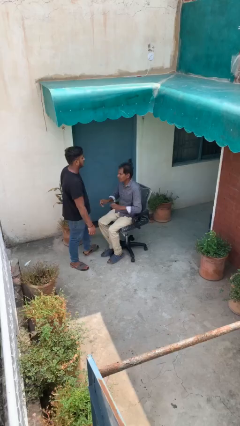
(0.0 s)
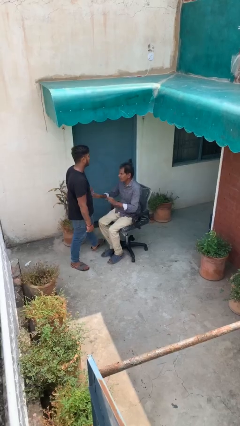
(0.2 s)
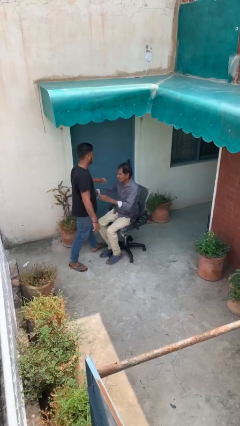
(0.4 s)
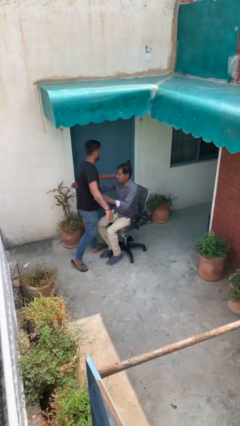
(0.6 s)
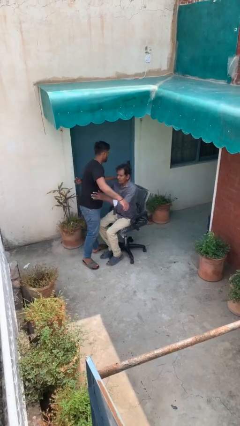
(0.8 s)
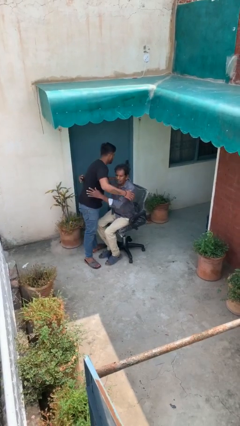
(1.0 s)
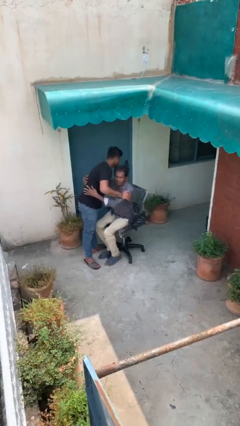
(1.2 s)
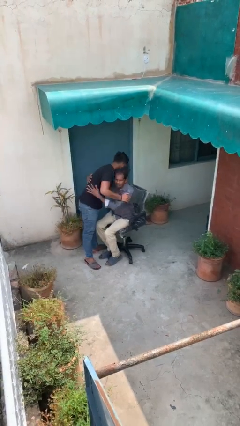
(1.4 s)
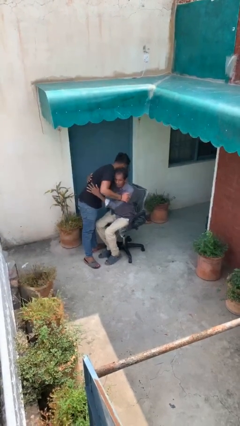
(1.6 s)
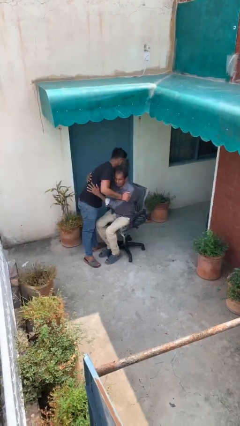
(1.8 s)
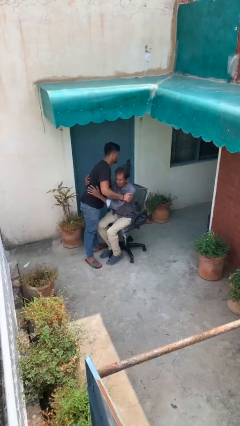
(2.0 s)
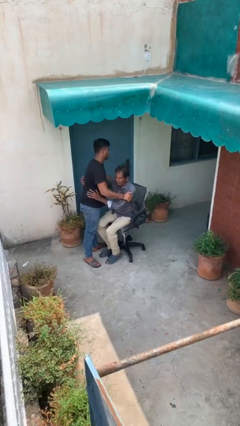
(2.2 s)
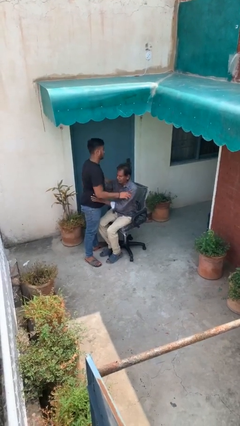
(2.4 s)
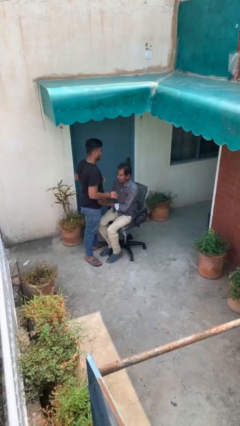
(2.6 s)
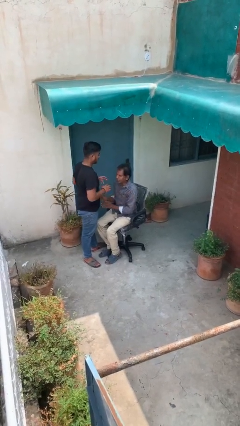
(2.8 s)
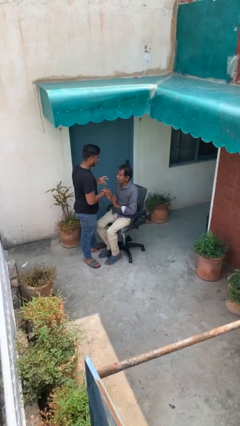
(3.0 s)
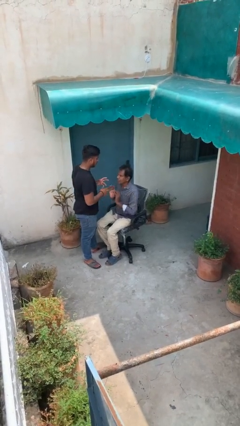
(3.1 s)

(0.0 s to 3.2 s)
person embraces person

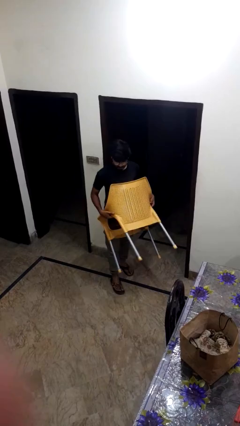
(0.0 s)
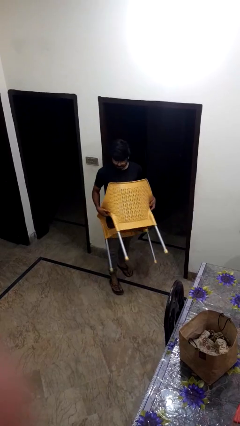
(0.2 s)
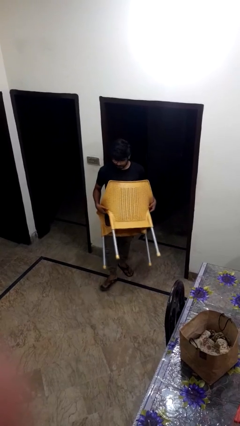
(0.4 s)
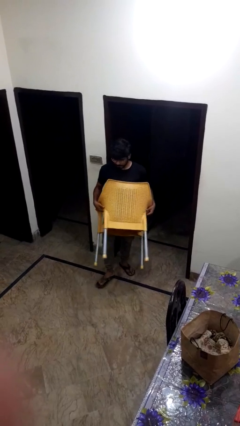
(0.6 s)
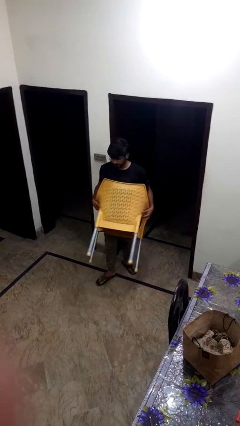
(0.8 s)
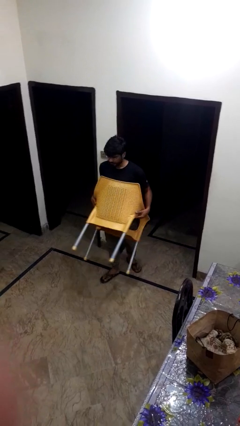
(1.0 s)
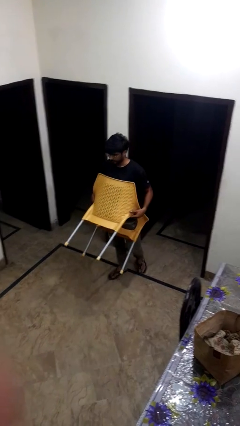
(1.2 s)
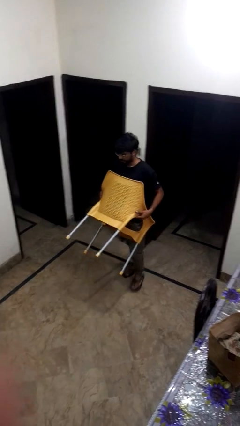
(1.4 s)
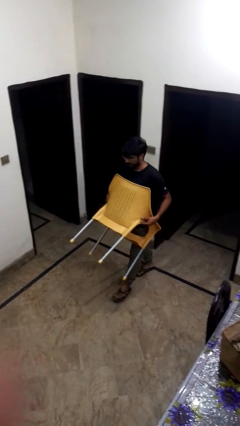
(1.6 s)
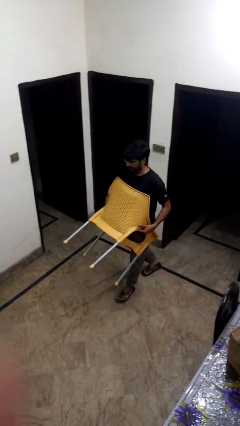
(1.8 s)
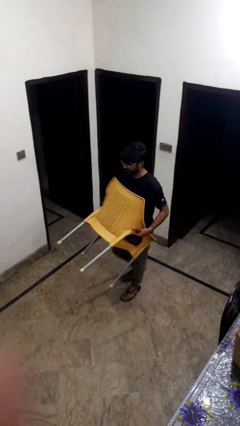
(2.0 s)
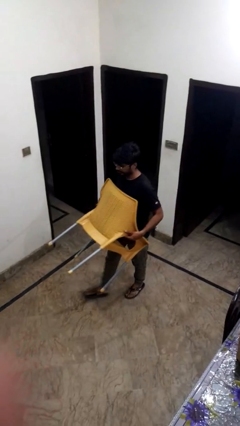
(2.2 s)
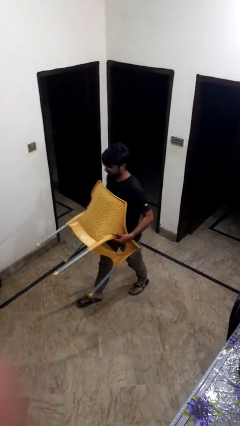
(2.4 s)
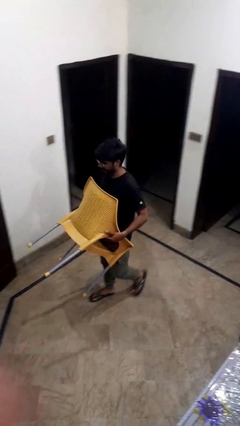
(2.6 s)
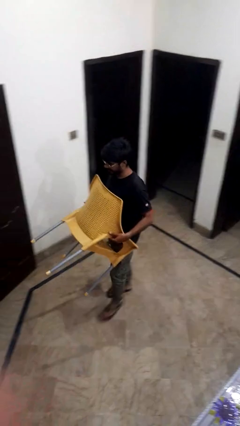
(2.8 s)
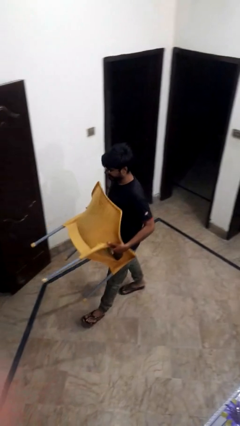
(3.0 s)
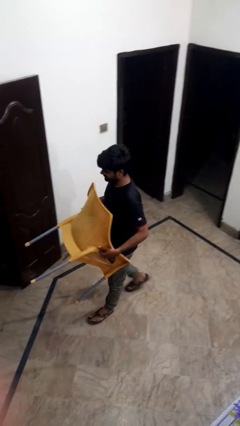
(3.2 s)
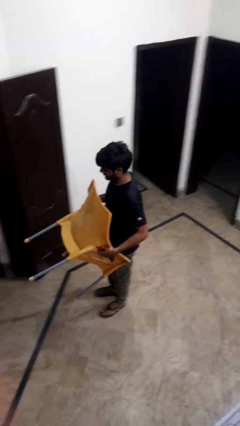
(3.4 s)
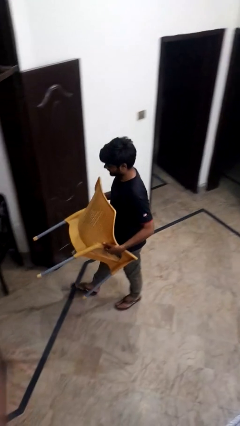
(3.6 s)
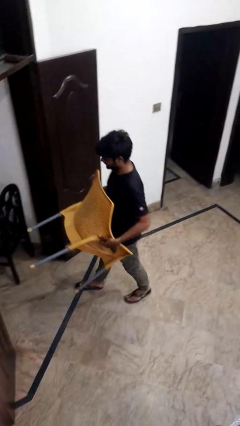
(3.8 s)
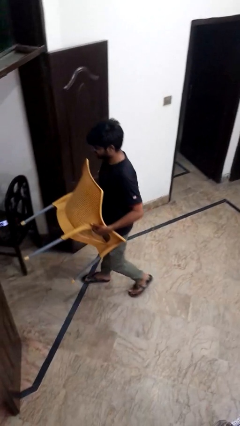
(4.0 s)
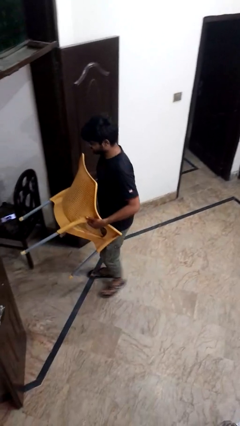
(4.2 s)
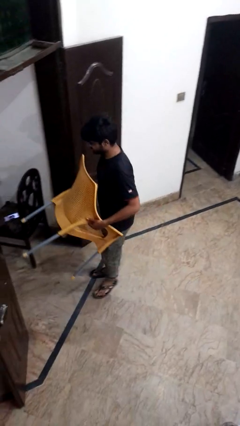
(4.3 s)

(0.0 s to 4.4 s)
person carries furniture

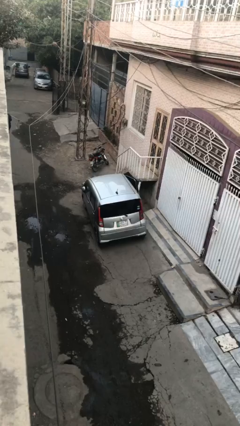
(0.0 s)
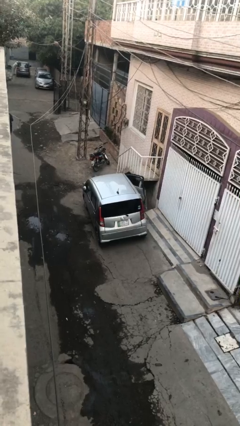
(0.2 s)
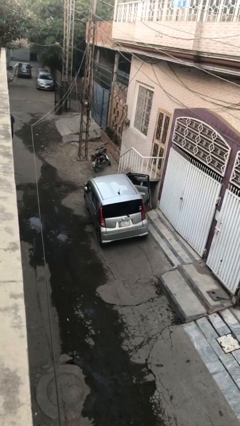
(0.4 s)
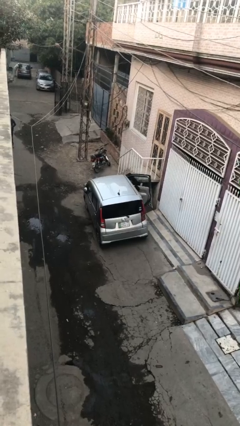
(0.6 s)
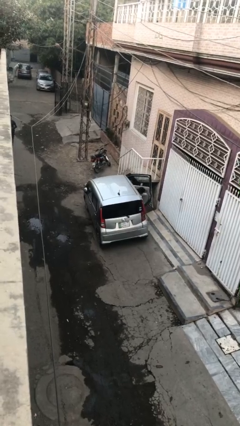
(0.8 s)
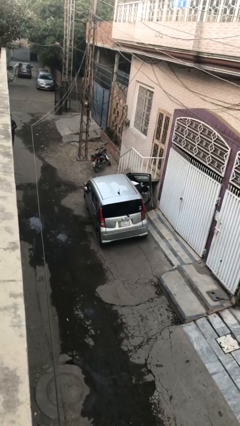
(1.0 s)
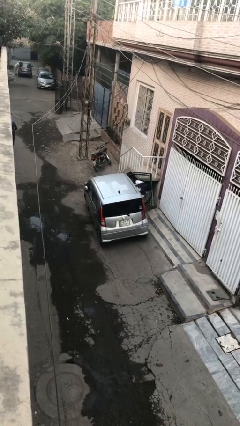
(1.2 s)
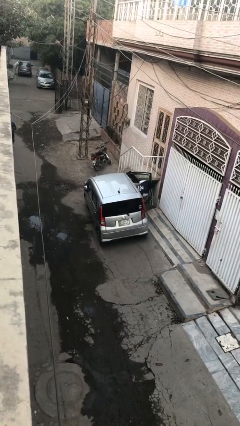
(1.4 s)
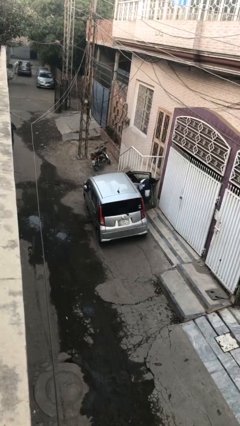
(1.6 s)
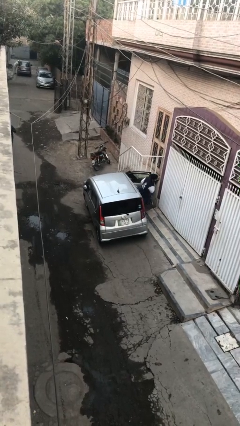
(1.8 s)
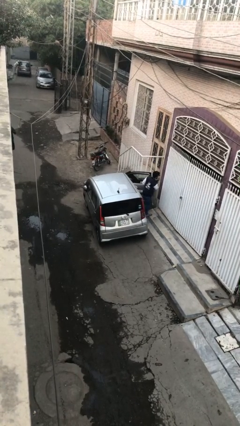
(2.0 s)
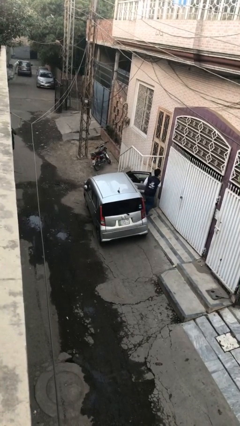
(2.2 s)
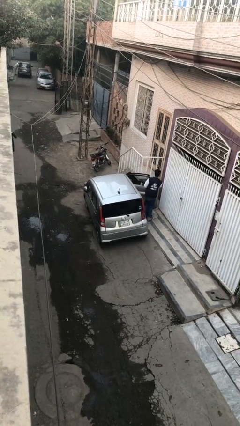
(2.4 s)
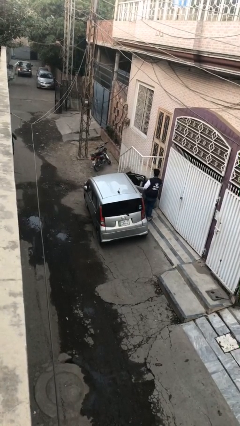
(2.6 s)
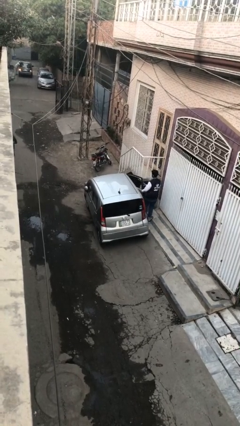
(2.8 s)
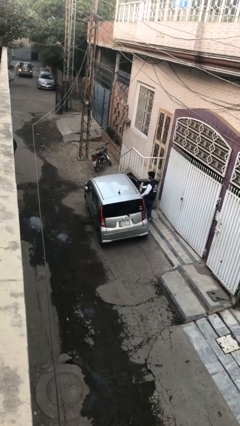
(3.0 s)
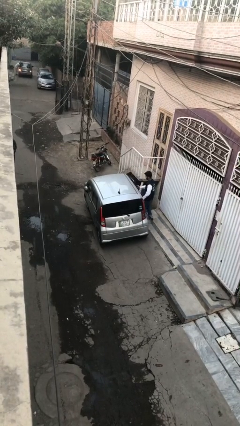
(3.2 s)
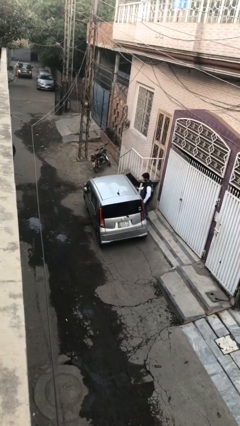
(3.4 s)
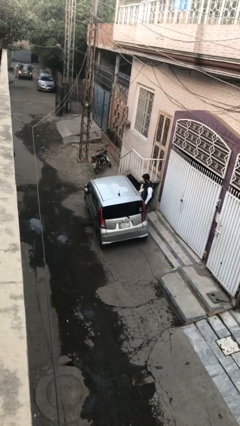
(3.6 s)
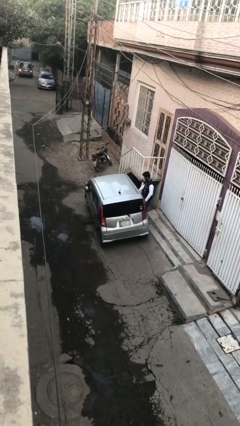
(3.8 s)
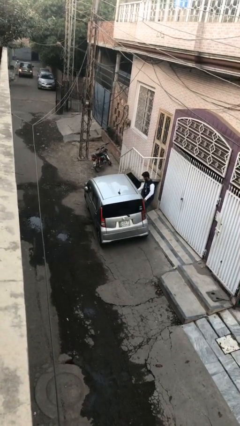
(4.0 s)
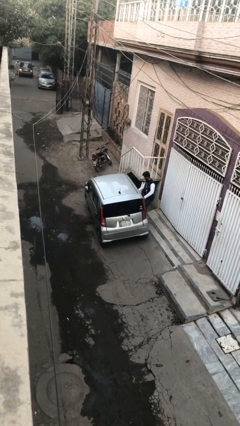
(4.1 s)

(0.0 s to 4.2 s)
car drops off person

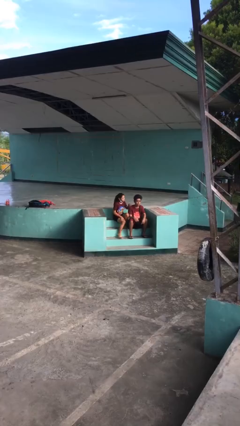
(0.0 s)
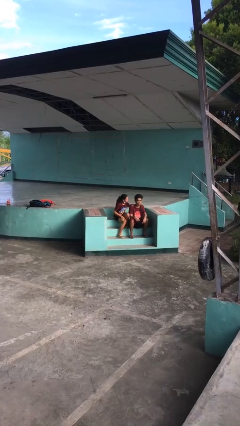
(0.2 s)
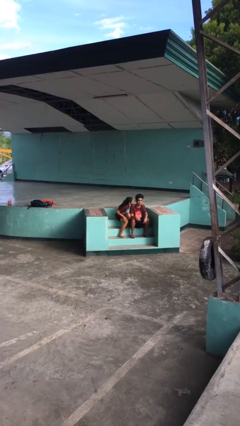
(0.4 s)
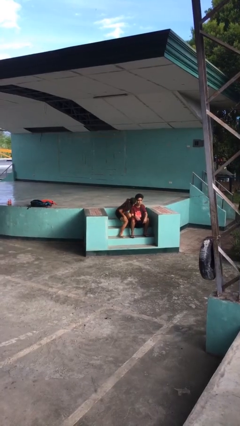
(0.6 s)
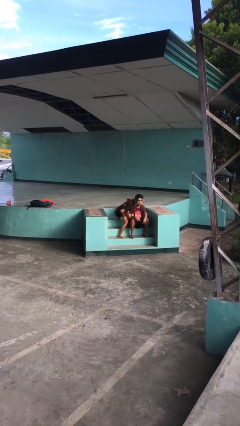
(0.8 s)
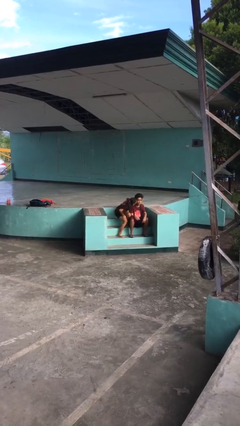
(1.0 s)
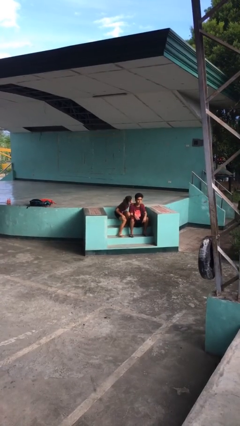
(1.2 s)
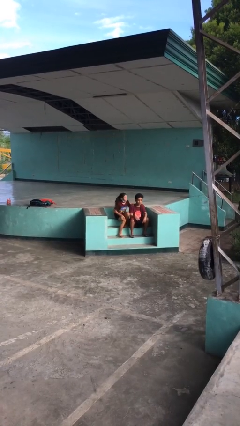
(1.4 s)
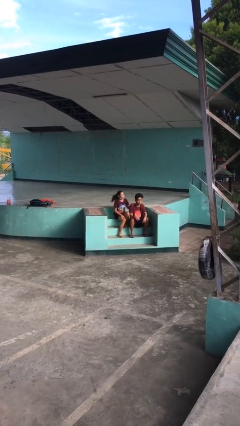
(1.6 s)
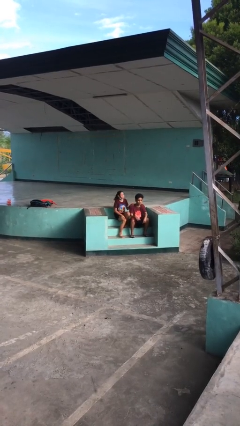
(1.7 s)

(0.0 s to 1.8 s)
person kisses cheek of person

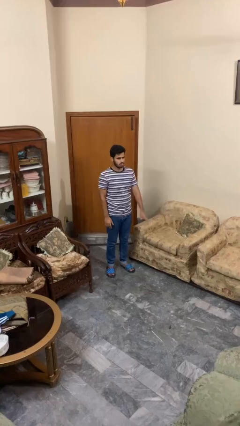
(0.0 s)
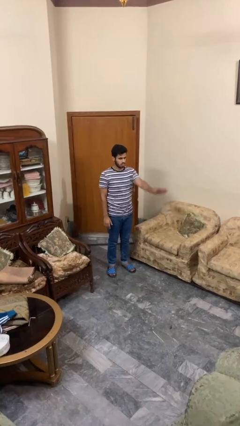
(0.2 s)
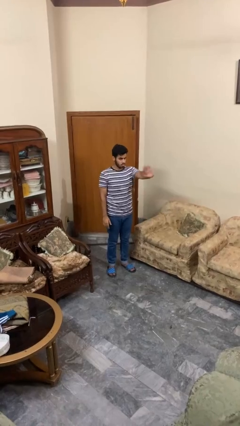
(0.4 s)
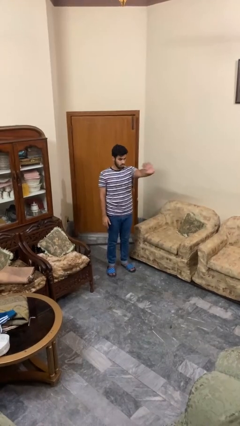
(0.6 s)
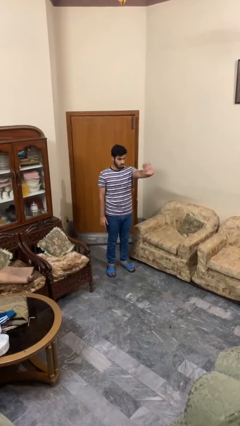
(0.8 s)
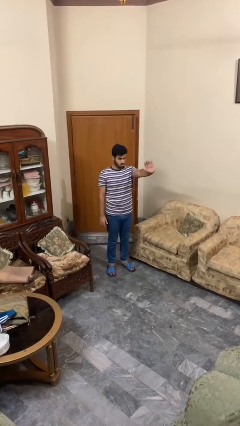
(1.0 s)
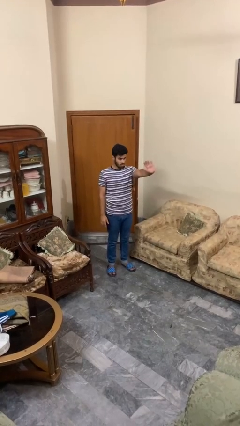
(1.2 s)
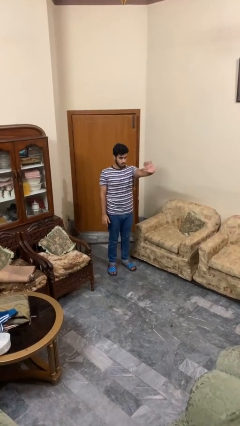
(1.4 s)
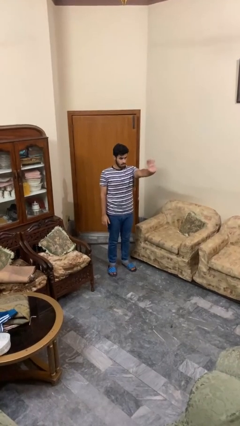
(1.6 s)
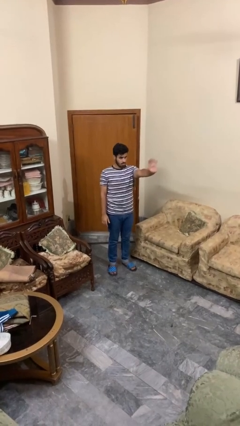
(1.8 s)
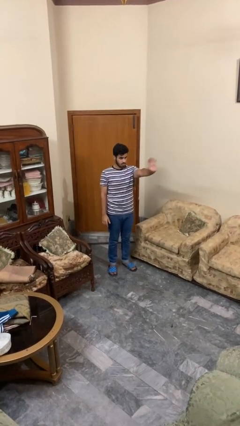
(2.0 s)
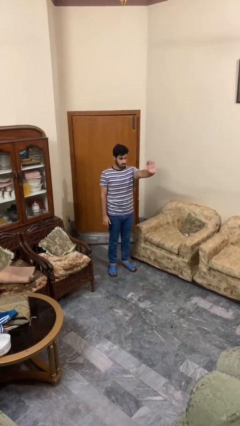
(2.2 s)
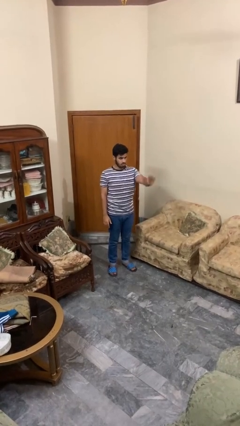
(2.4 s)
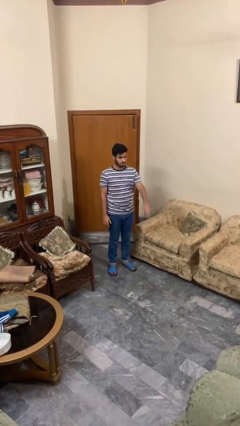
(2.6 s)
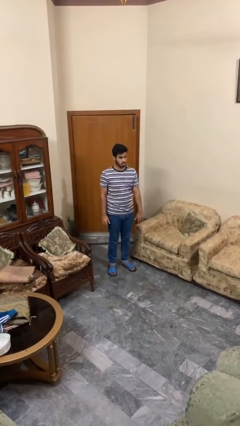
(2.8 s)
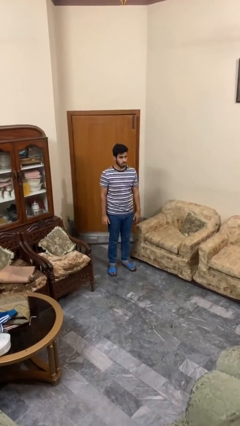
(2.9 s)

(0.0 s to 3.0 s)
person waves at person

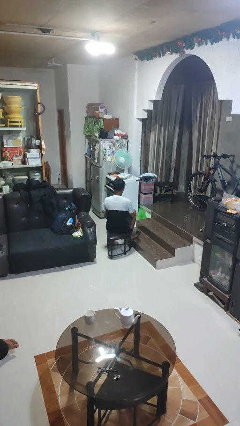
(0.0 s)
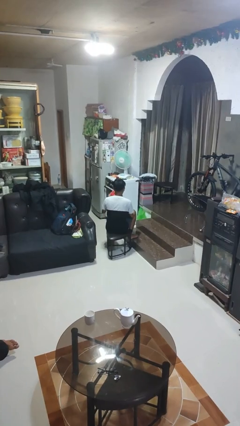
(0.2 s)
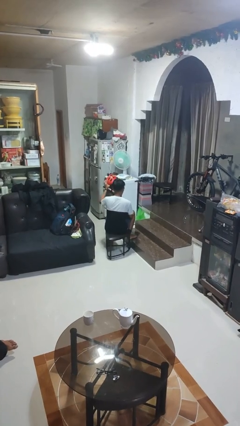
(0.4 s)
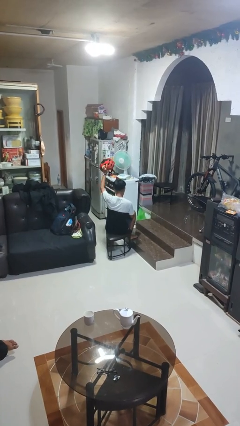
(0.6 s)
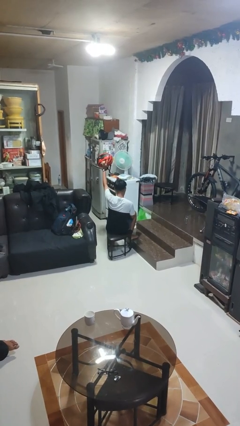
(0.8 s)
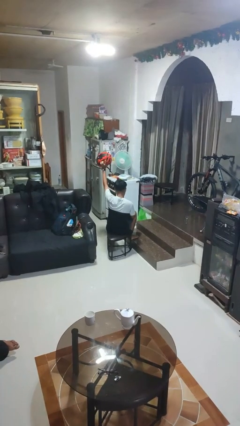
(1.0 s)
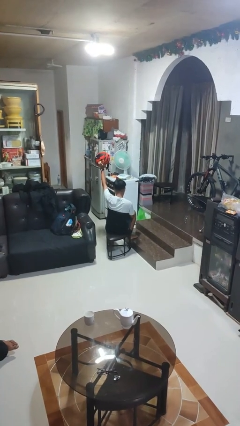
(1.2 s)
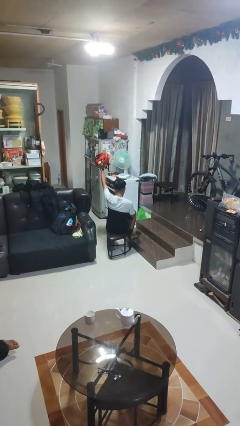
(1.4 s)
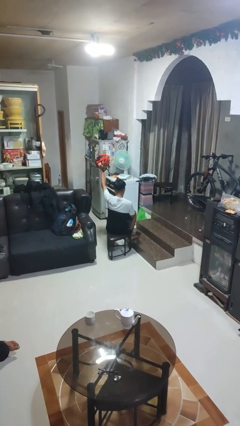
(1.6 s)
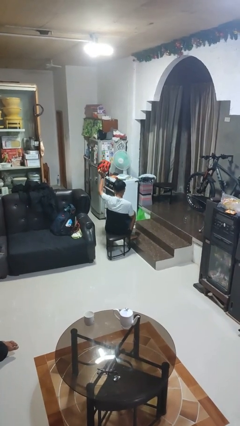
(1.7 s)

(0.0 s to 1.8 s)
person holds object above head
